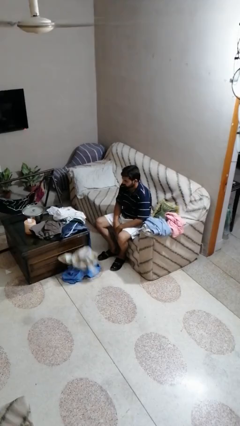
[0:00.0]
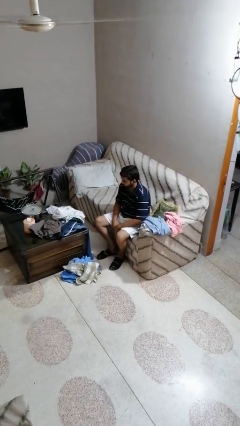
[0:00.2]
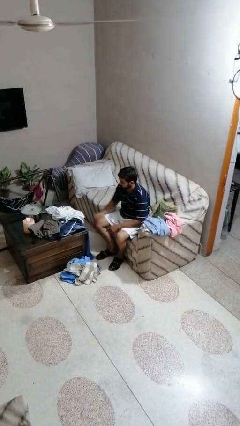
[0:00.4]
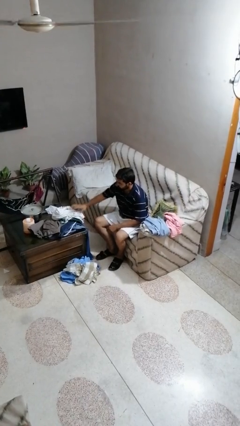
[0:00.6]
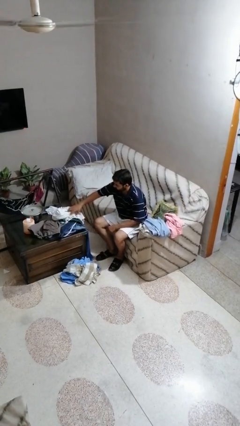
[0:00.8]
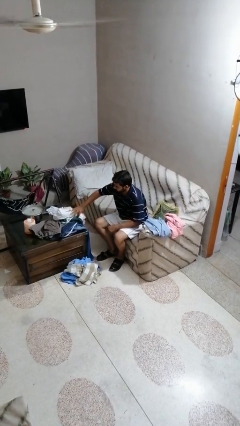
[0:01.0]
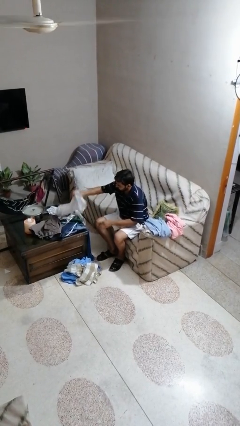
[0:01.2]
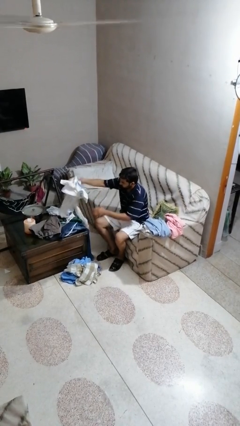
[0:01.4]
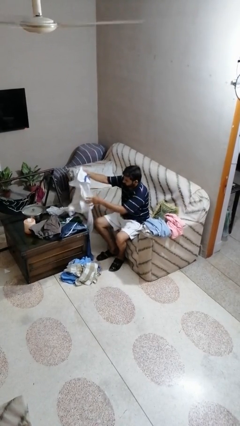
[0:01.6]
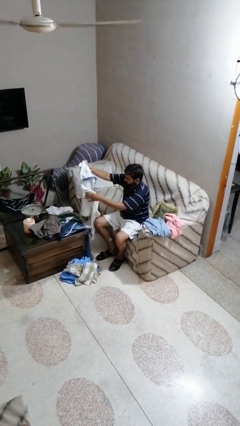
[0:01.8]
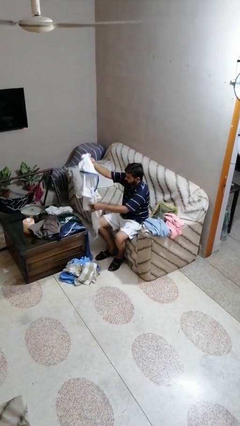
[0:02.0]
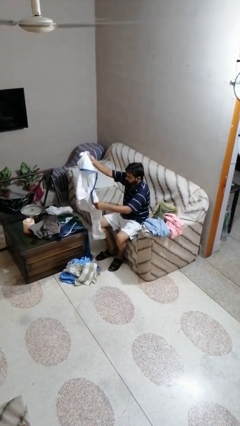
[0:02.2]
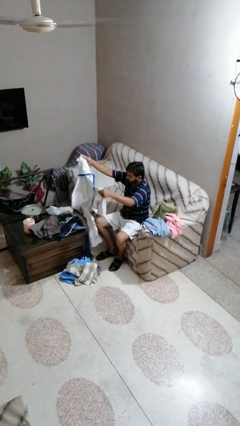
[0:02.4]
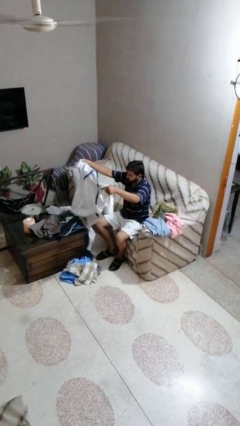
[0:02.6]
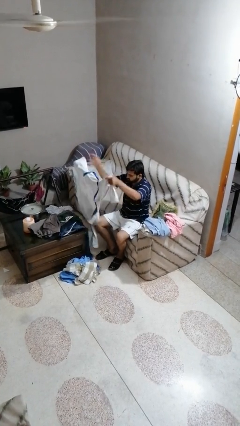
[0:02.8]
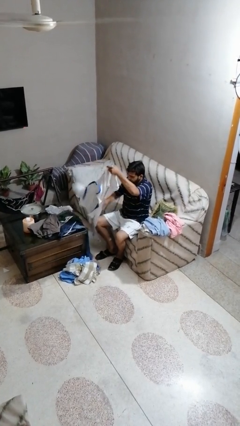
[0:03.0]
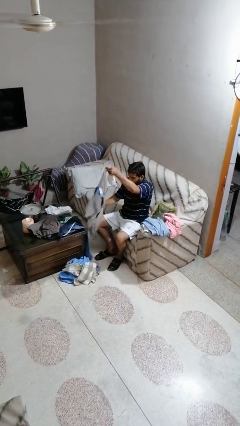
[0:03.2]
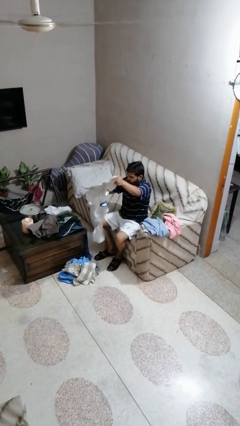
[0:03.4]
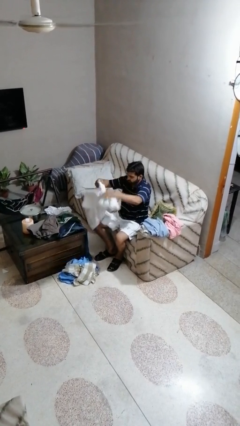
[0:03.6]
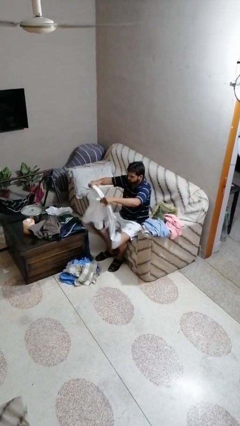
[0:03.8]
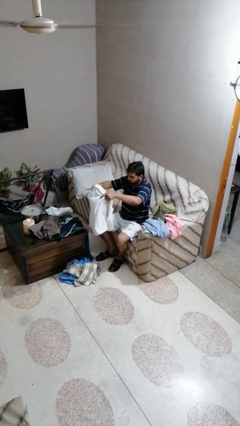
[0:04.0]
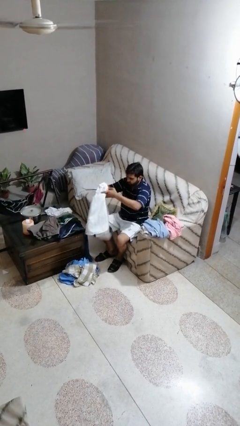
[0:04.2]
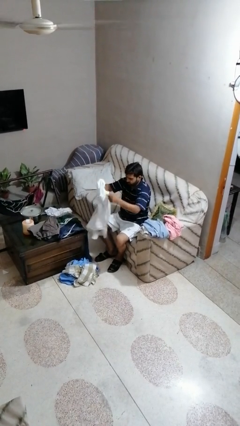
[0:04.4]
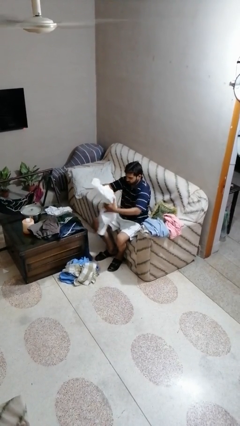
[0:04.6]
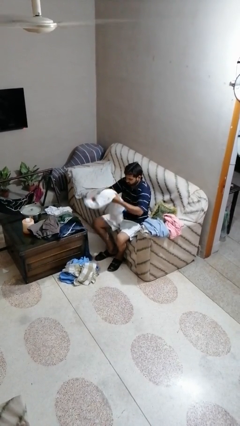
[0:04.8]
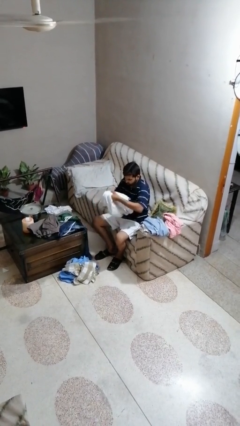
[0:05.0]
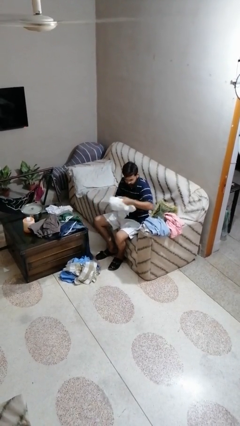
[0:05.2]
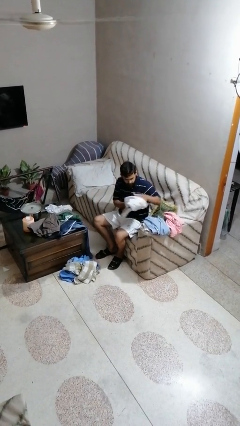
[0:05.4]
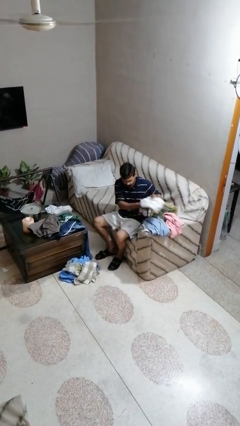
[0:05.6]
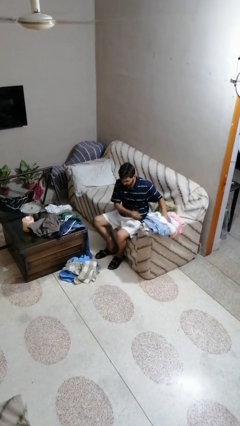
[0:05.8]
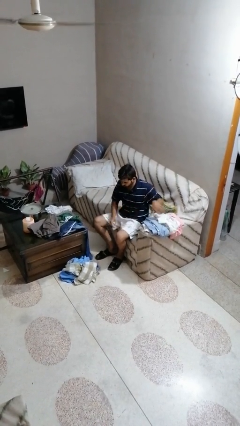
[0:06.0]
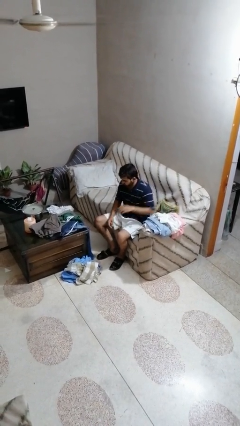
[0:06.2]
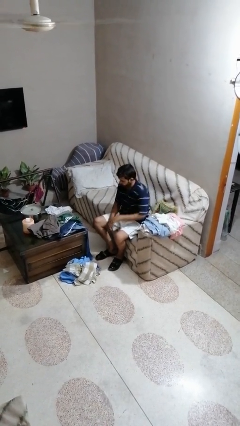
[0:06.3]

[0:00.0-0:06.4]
person folds shirt

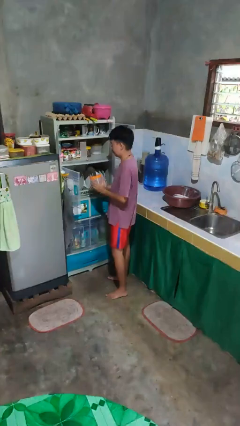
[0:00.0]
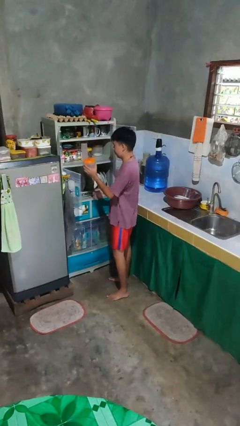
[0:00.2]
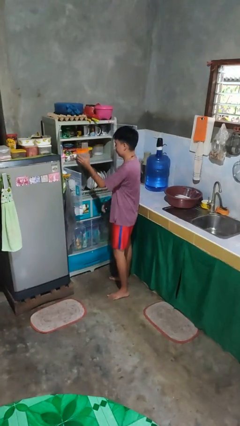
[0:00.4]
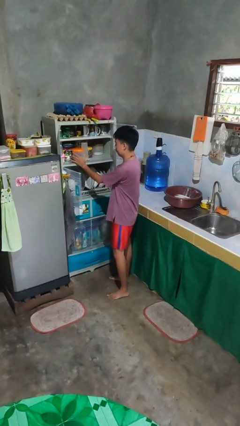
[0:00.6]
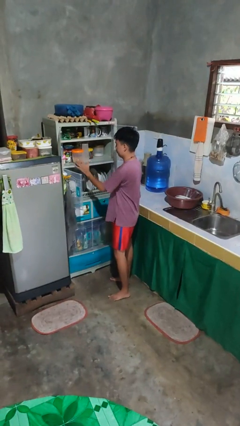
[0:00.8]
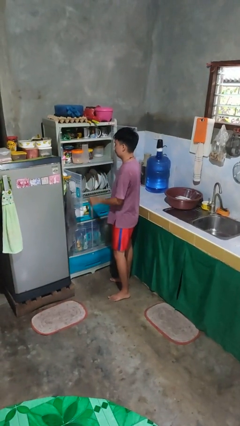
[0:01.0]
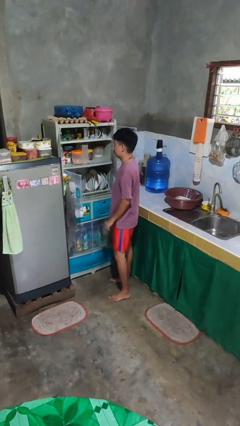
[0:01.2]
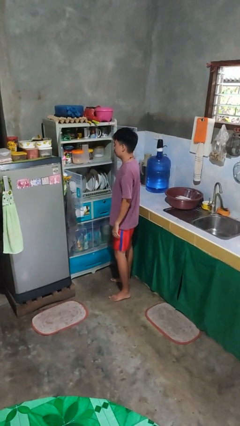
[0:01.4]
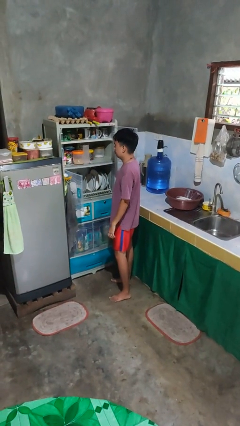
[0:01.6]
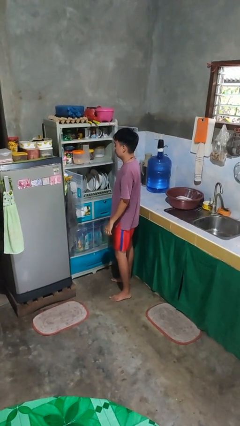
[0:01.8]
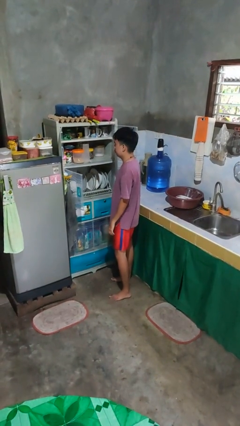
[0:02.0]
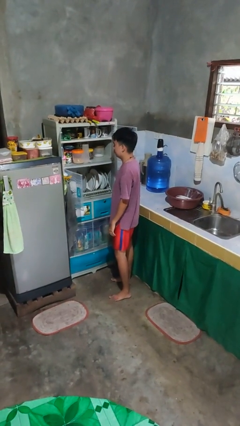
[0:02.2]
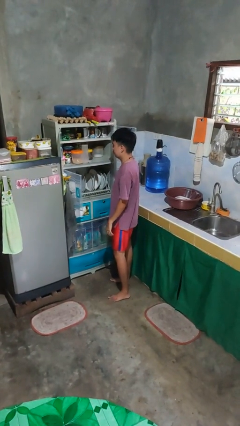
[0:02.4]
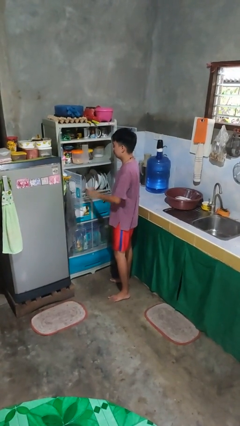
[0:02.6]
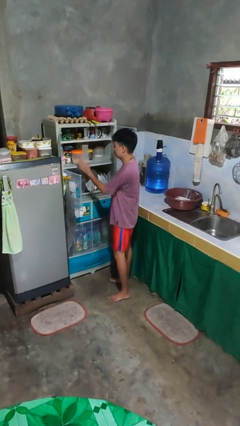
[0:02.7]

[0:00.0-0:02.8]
person puts object in cabinet

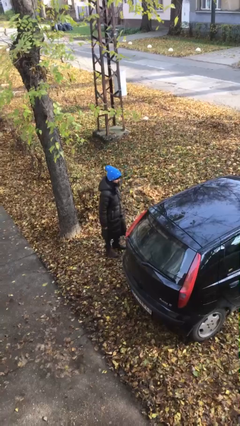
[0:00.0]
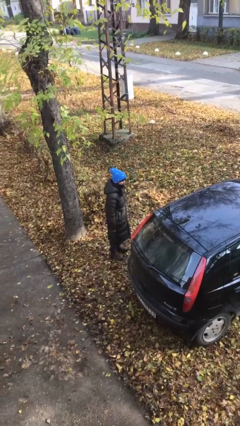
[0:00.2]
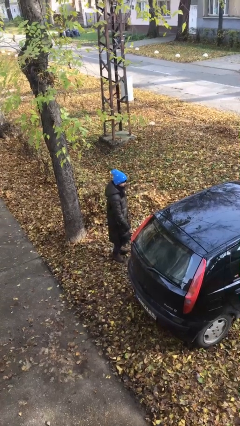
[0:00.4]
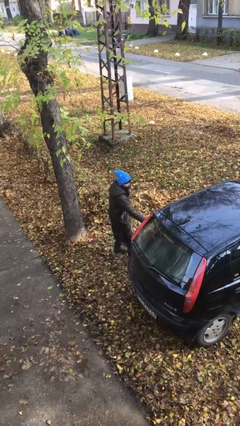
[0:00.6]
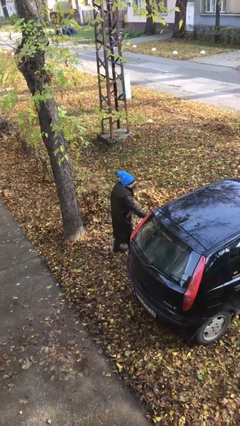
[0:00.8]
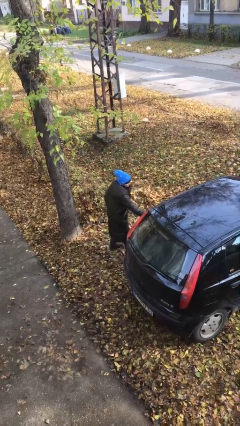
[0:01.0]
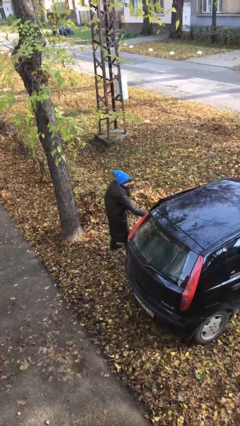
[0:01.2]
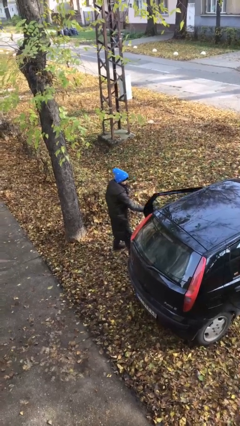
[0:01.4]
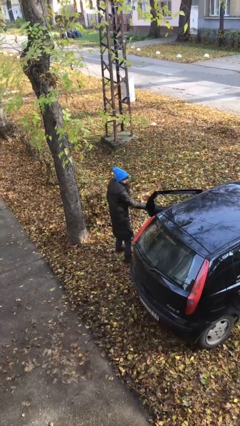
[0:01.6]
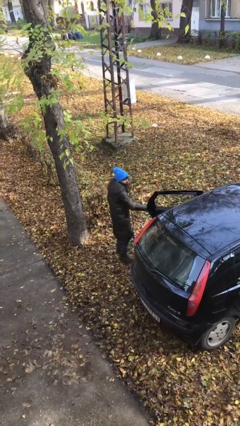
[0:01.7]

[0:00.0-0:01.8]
person opens car door

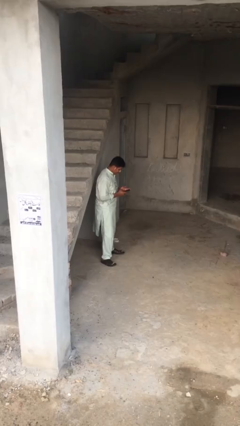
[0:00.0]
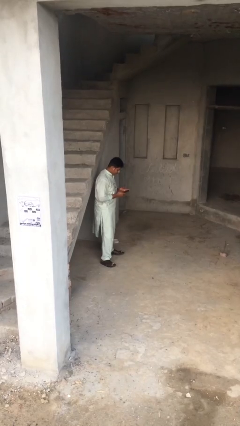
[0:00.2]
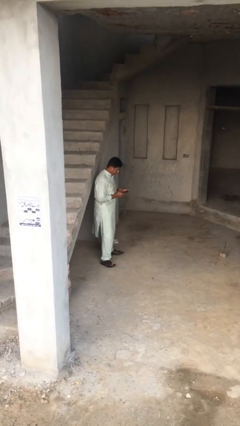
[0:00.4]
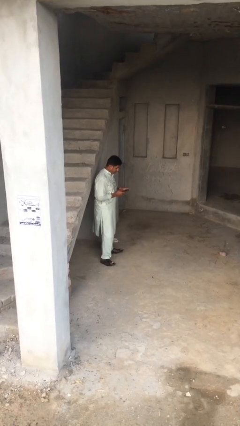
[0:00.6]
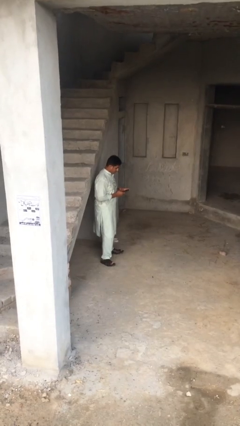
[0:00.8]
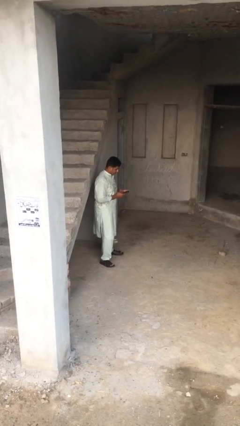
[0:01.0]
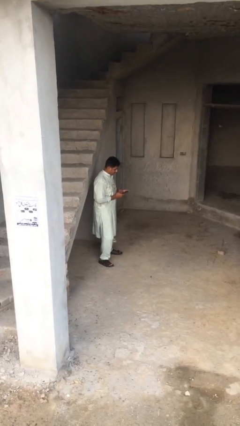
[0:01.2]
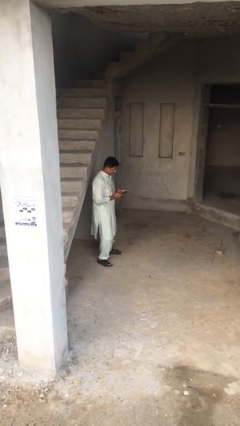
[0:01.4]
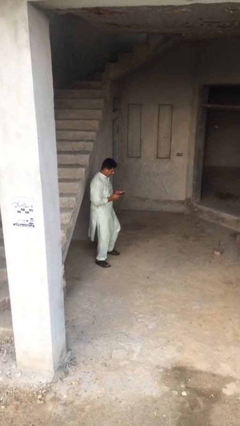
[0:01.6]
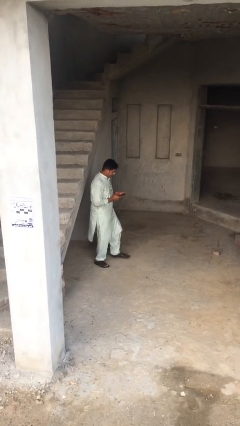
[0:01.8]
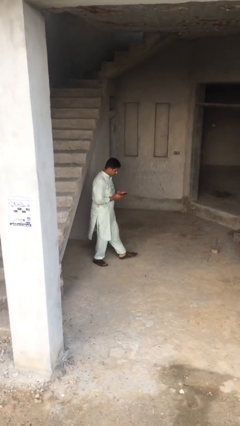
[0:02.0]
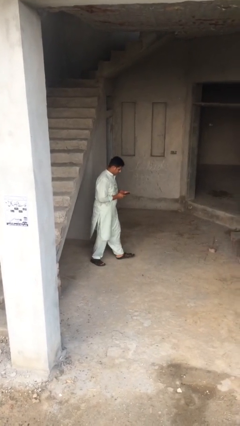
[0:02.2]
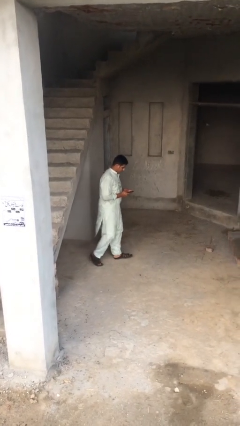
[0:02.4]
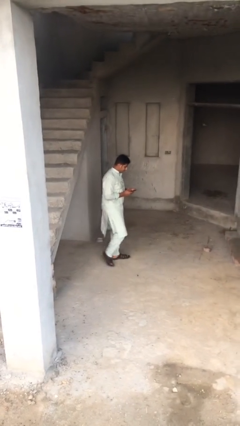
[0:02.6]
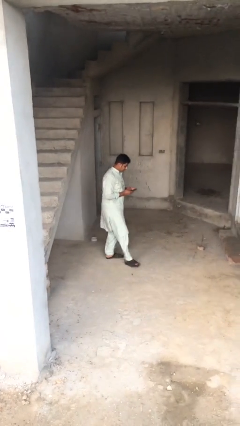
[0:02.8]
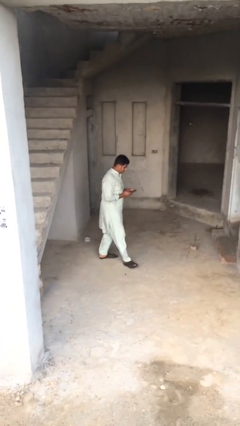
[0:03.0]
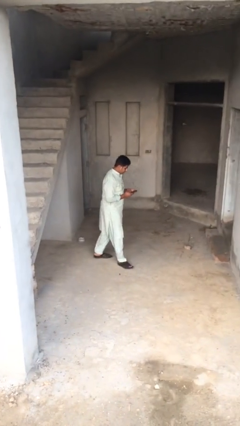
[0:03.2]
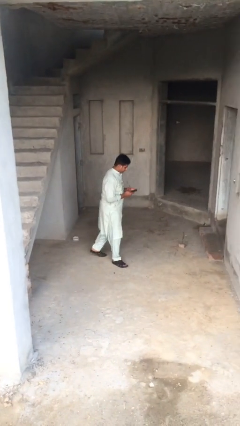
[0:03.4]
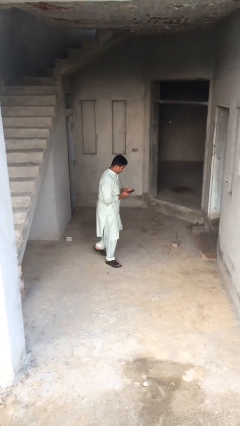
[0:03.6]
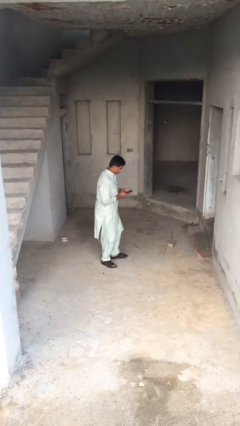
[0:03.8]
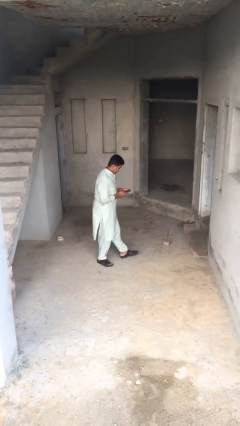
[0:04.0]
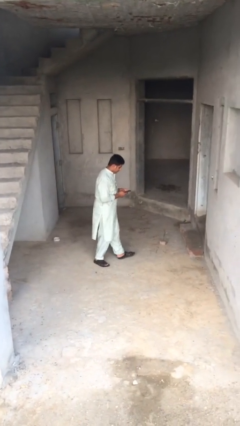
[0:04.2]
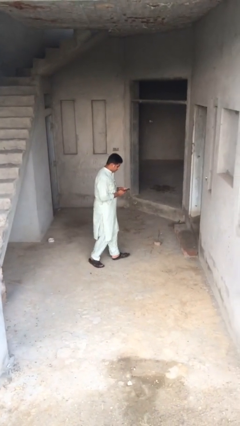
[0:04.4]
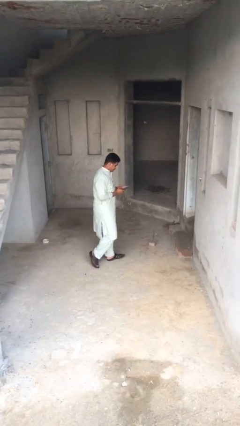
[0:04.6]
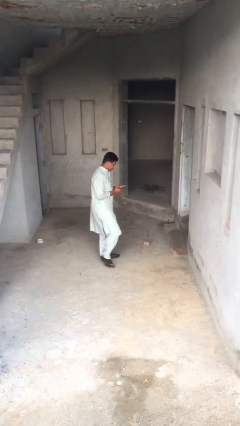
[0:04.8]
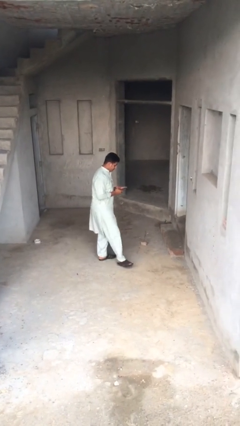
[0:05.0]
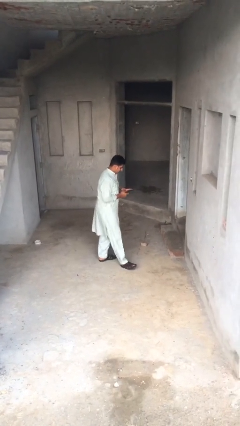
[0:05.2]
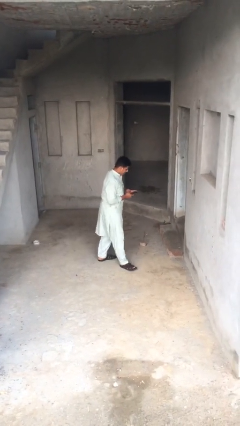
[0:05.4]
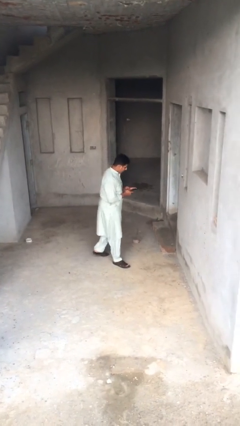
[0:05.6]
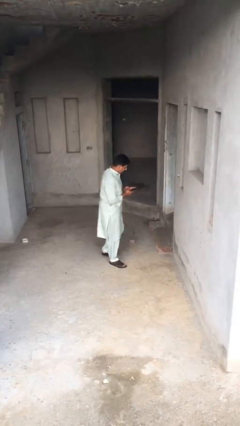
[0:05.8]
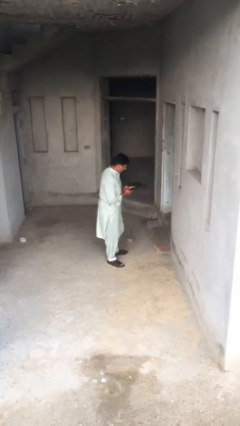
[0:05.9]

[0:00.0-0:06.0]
person texts on phone

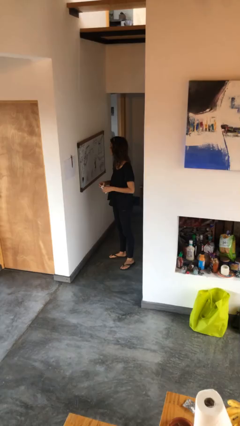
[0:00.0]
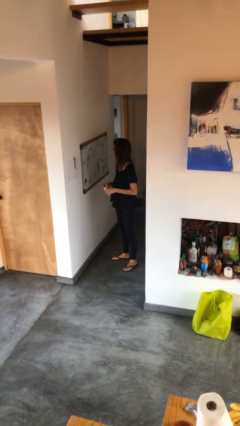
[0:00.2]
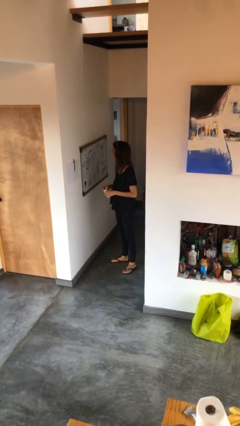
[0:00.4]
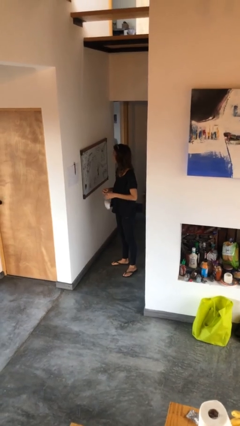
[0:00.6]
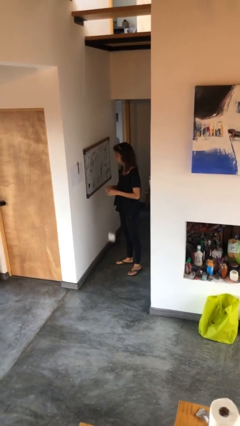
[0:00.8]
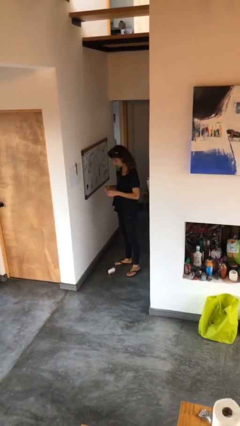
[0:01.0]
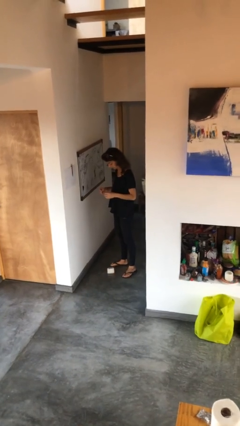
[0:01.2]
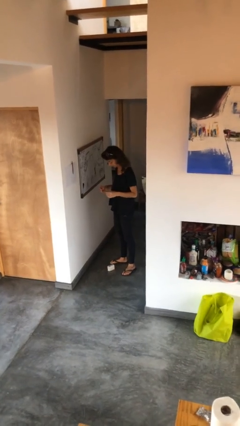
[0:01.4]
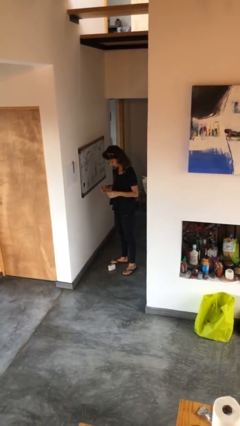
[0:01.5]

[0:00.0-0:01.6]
person drops object
